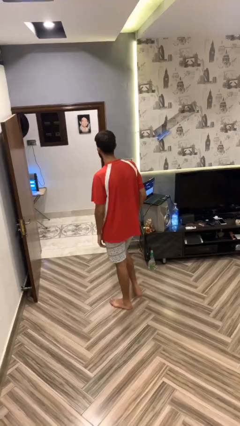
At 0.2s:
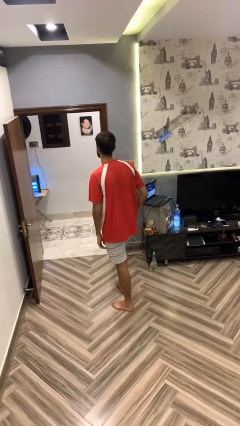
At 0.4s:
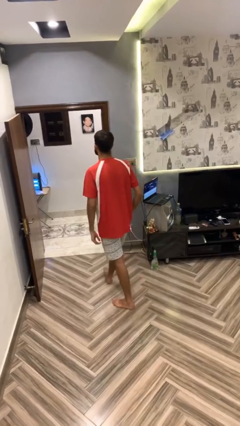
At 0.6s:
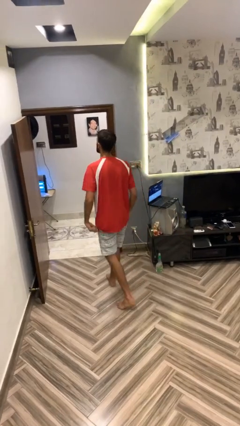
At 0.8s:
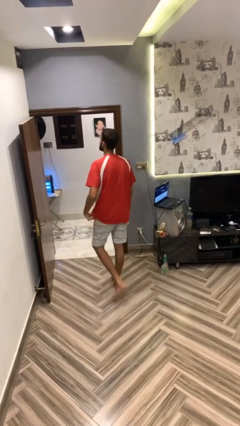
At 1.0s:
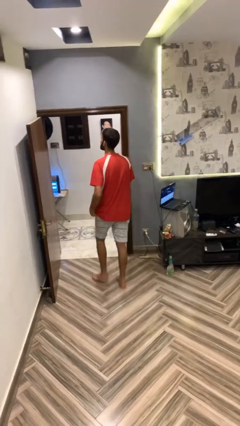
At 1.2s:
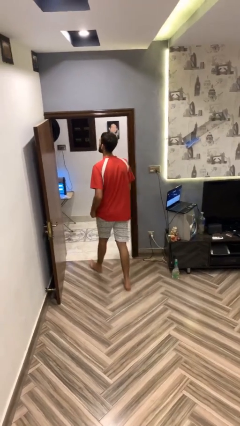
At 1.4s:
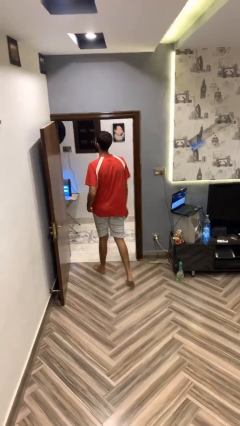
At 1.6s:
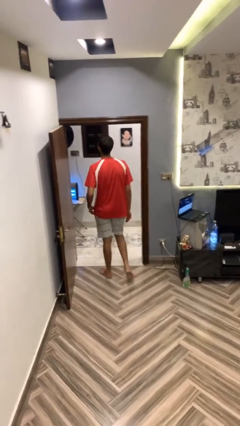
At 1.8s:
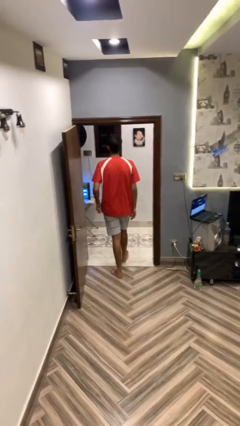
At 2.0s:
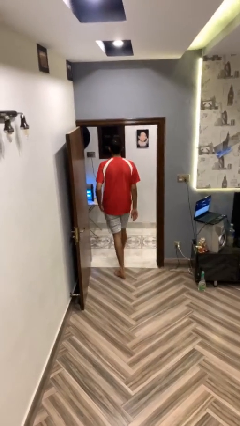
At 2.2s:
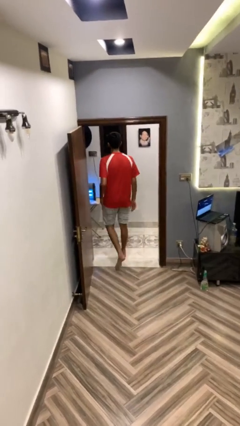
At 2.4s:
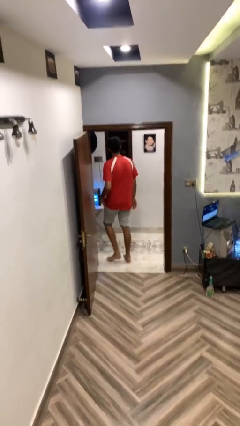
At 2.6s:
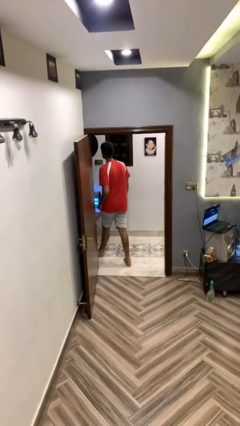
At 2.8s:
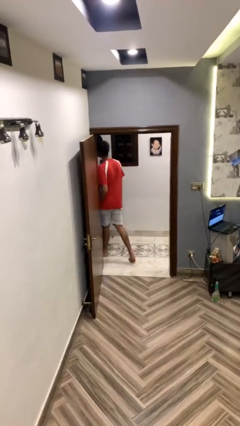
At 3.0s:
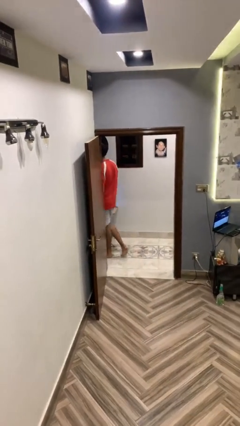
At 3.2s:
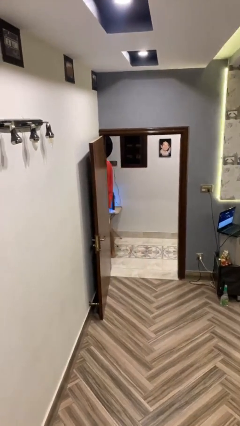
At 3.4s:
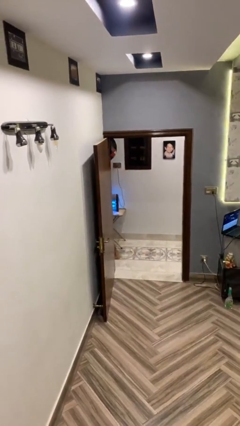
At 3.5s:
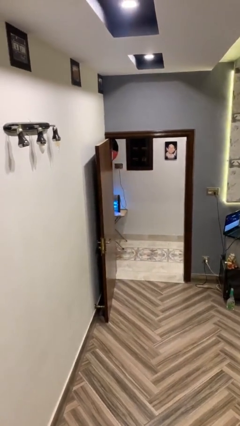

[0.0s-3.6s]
person exits scene through structure

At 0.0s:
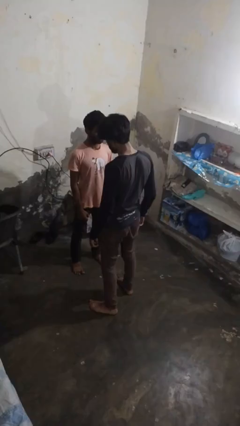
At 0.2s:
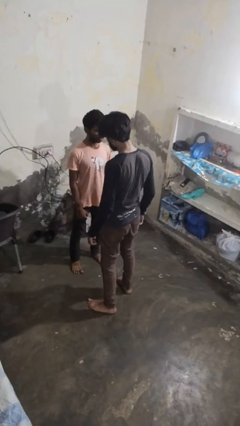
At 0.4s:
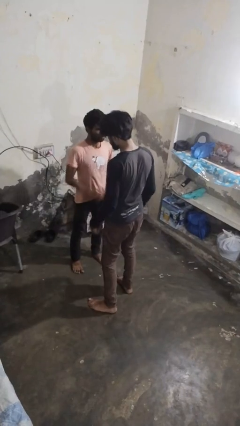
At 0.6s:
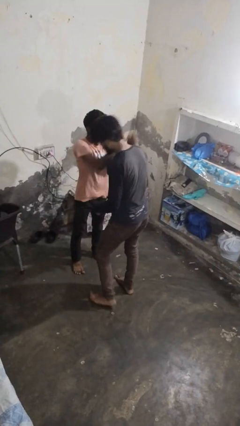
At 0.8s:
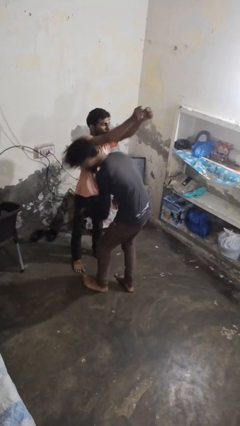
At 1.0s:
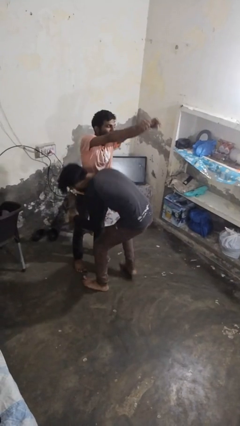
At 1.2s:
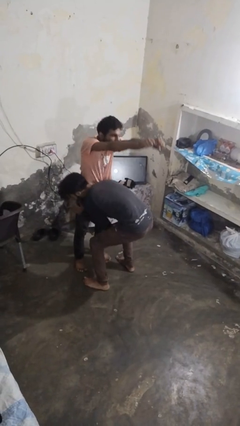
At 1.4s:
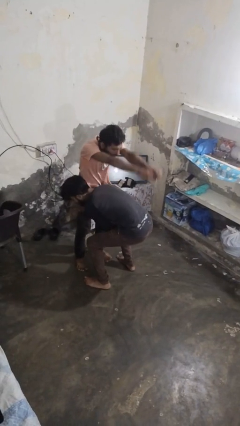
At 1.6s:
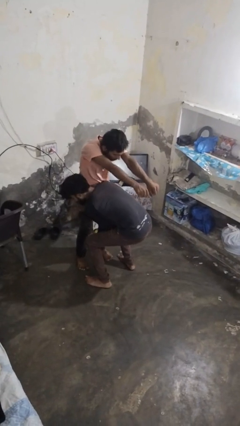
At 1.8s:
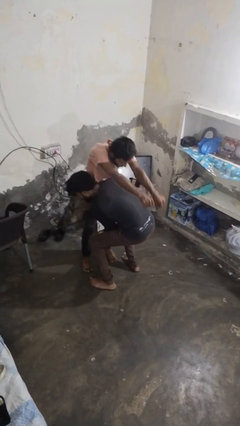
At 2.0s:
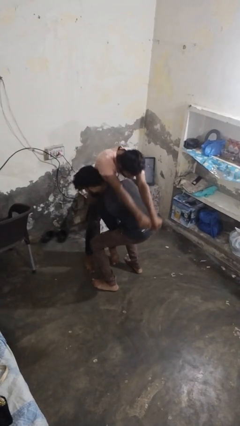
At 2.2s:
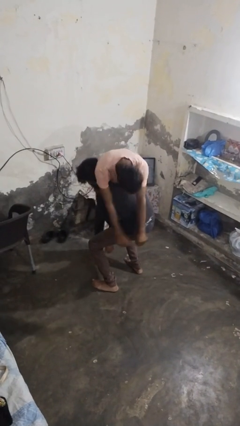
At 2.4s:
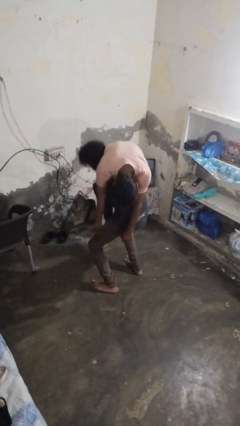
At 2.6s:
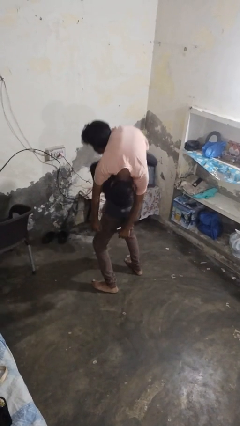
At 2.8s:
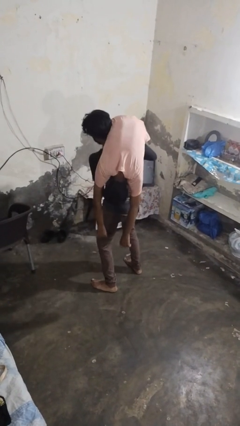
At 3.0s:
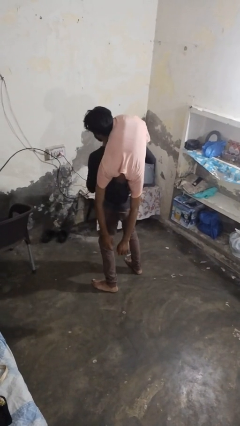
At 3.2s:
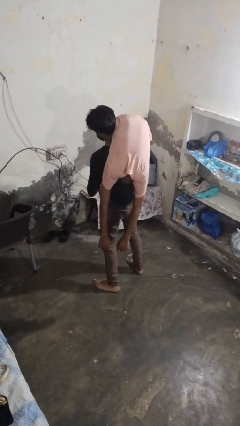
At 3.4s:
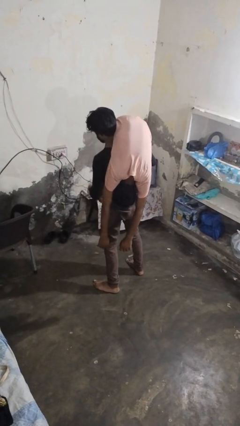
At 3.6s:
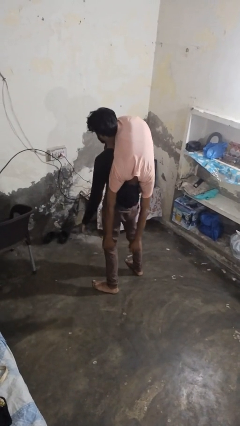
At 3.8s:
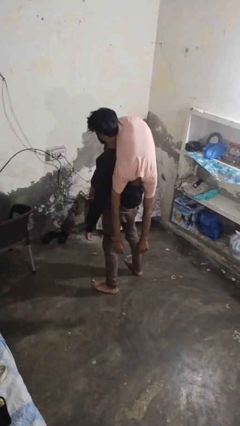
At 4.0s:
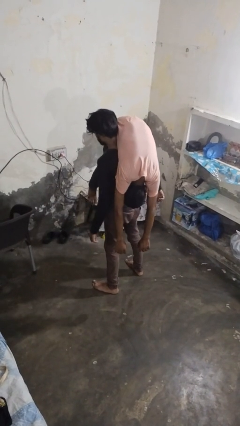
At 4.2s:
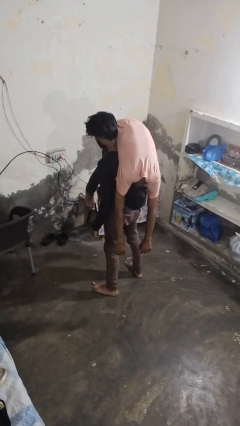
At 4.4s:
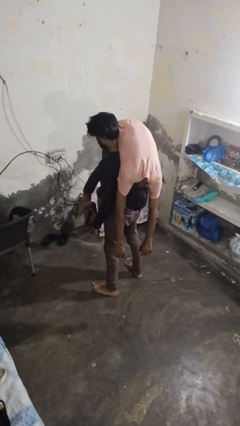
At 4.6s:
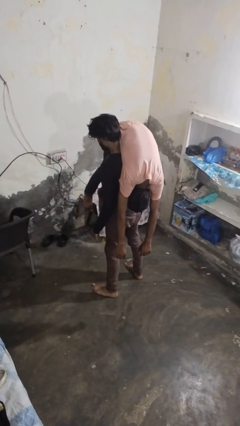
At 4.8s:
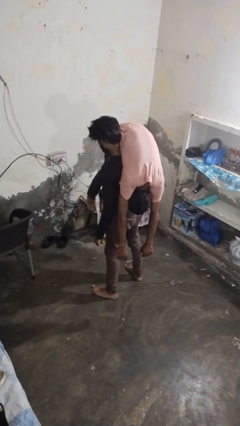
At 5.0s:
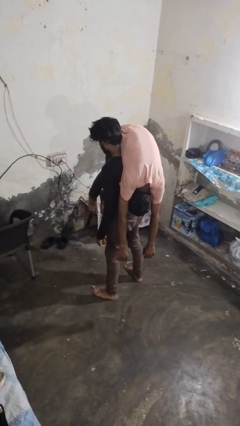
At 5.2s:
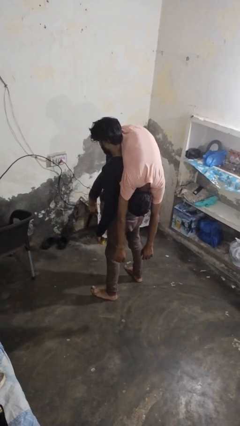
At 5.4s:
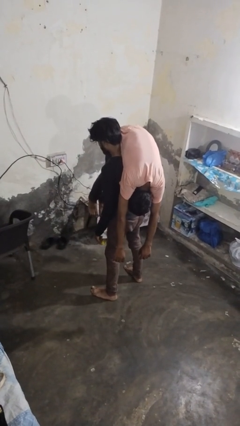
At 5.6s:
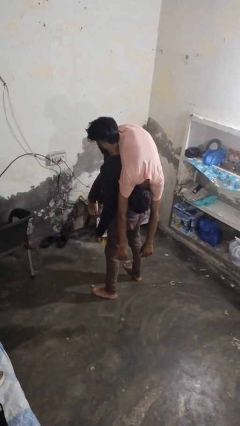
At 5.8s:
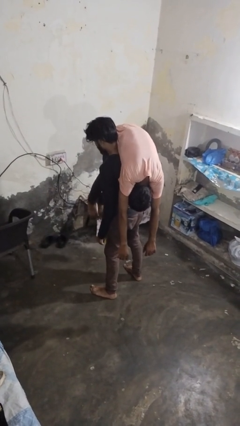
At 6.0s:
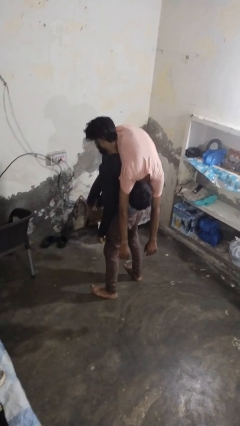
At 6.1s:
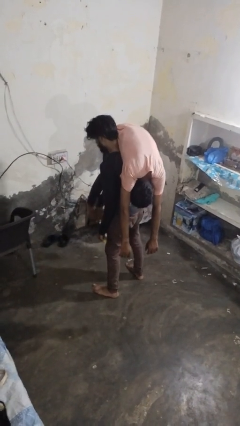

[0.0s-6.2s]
person carries person over shoulder

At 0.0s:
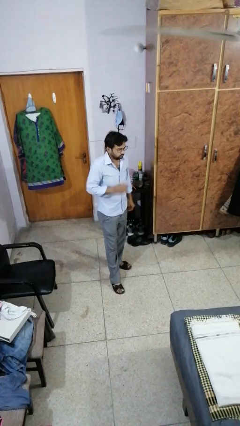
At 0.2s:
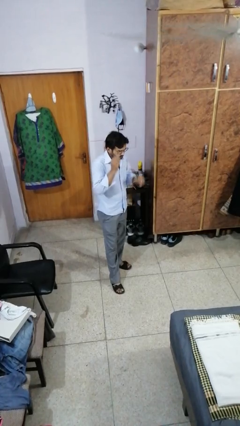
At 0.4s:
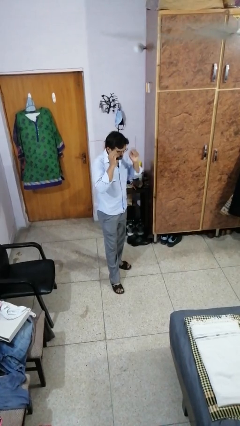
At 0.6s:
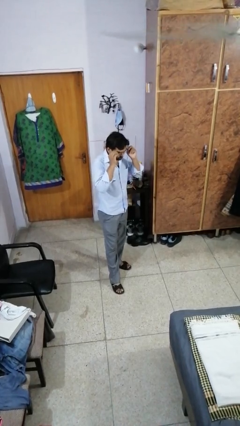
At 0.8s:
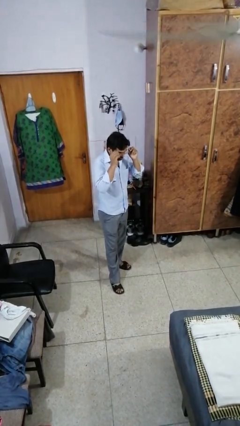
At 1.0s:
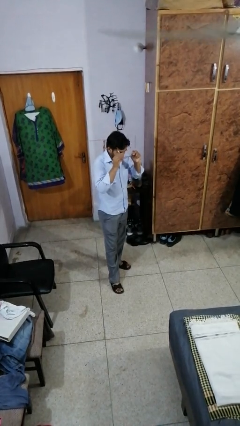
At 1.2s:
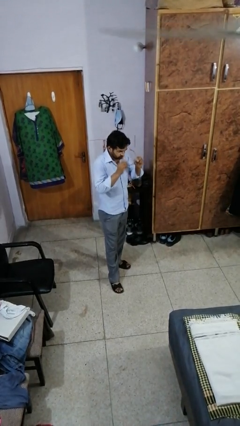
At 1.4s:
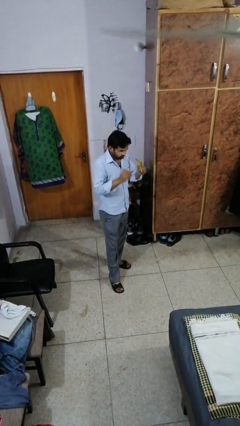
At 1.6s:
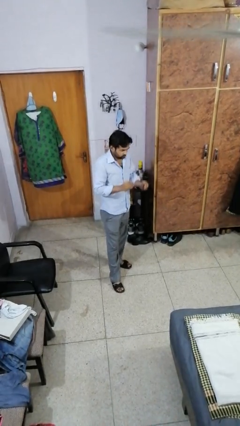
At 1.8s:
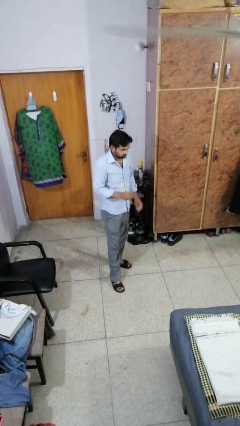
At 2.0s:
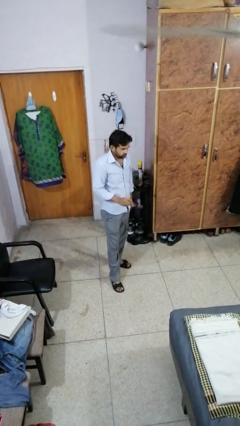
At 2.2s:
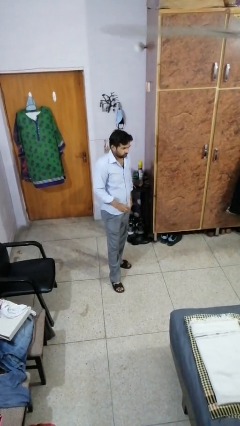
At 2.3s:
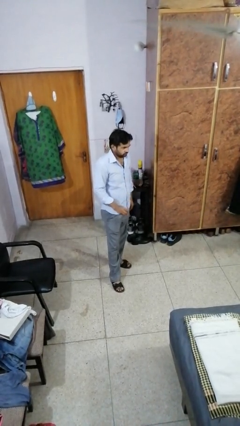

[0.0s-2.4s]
person takes off glasses

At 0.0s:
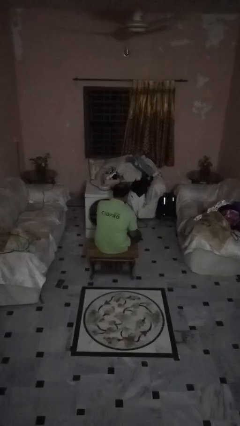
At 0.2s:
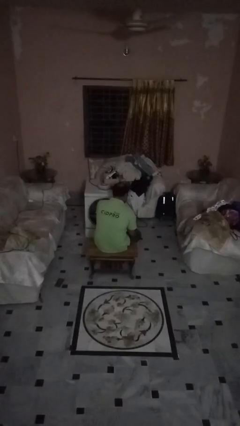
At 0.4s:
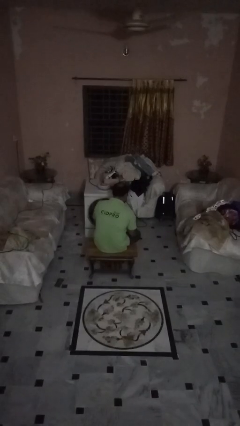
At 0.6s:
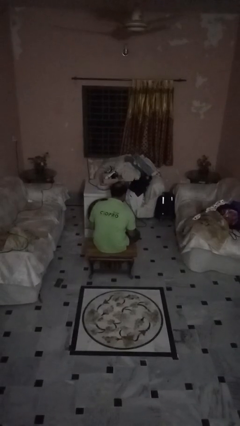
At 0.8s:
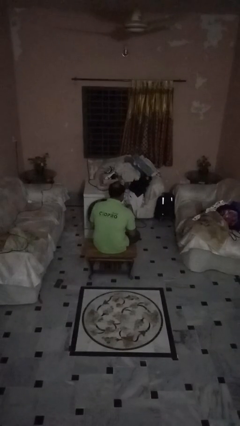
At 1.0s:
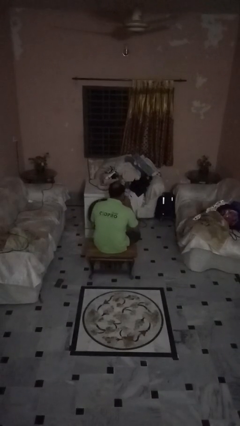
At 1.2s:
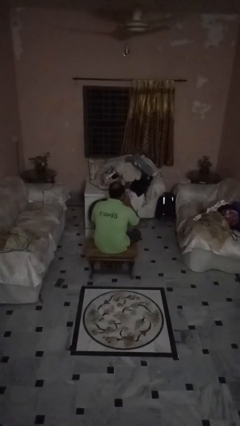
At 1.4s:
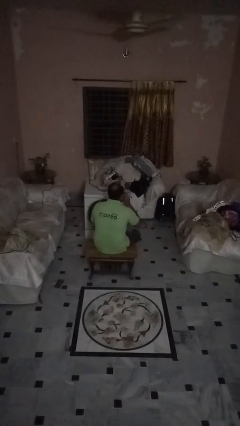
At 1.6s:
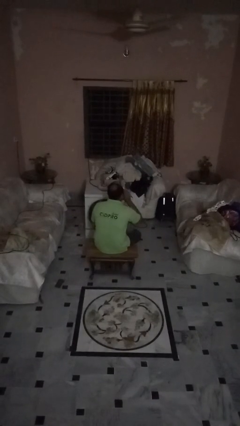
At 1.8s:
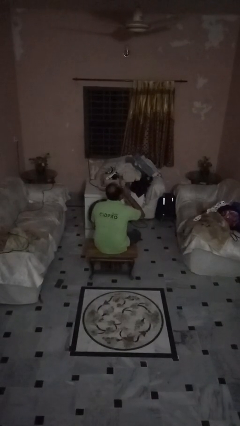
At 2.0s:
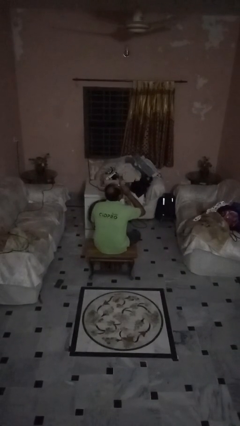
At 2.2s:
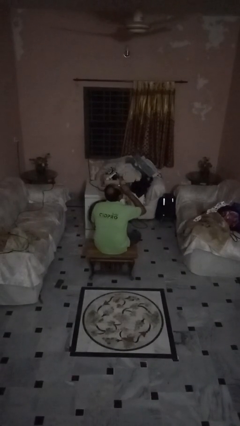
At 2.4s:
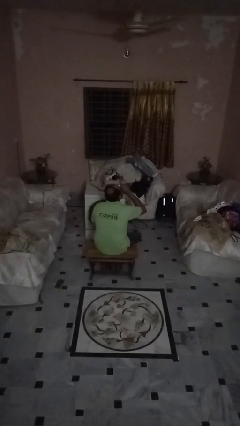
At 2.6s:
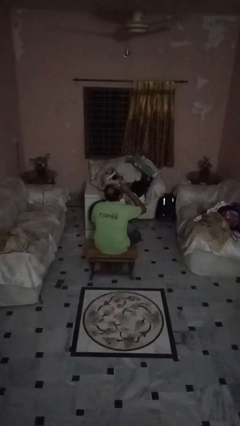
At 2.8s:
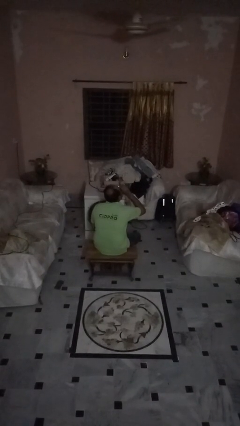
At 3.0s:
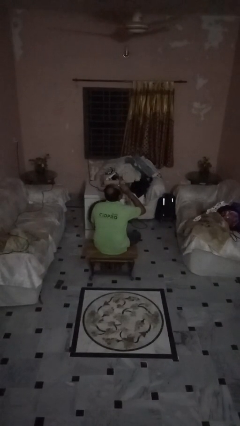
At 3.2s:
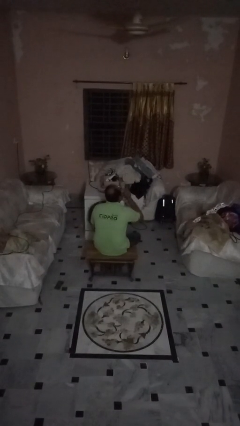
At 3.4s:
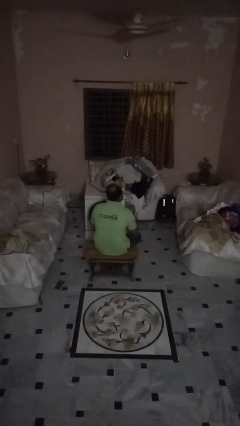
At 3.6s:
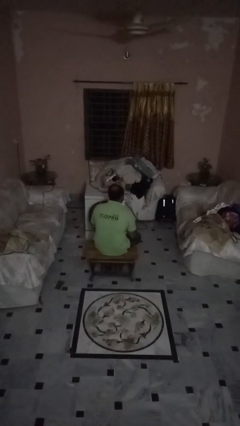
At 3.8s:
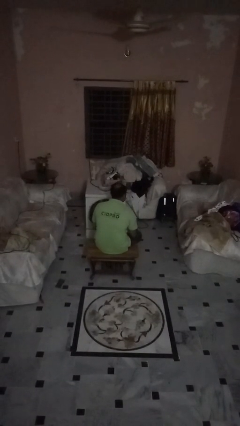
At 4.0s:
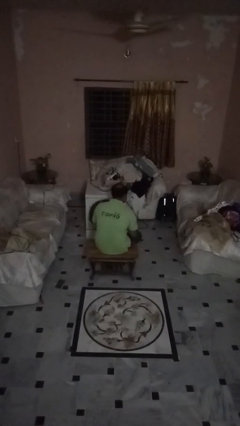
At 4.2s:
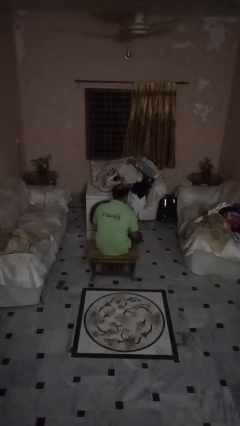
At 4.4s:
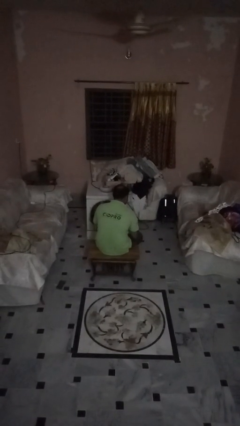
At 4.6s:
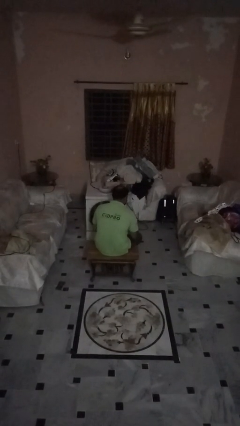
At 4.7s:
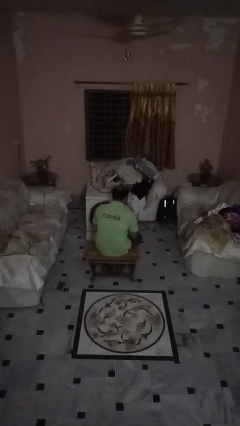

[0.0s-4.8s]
person drinks from beverage can

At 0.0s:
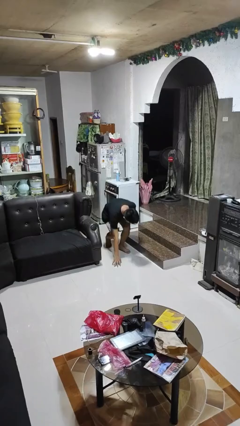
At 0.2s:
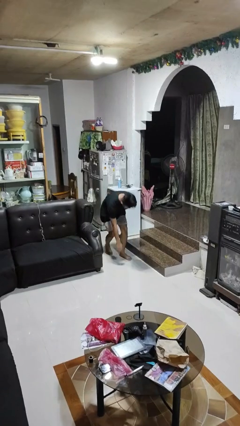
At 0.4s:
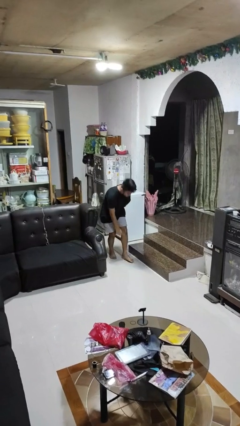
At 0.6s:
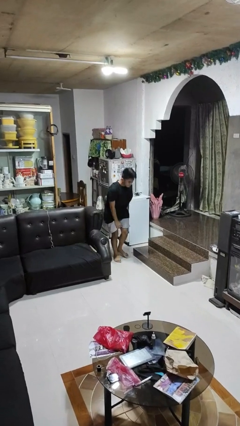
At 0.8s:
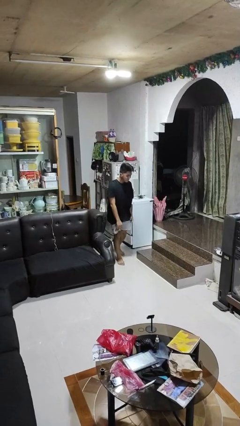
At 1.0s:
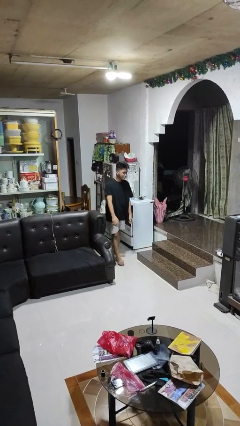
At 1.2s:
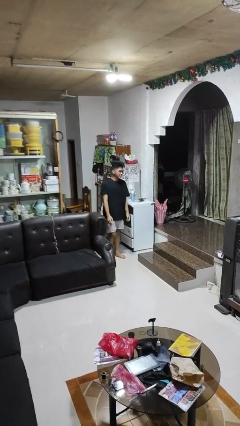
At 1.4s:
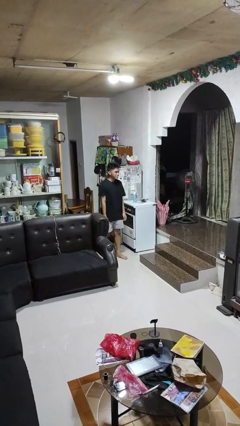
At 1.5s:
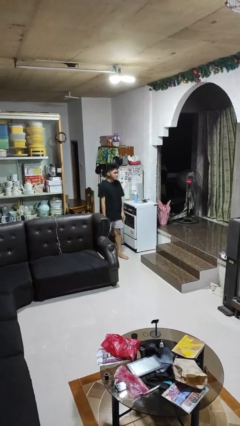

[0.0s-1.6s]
person stands up from floor
